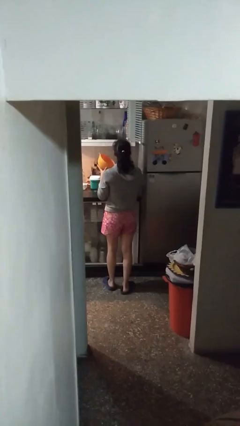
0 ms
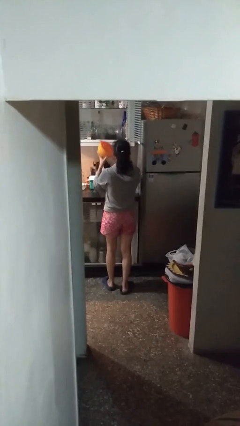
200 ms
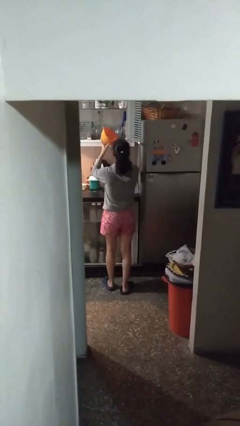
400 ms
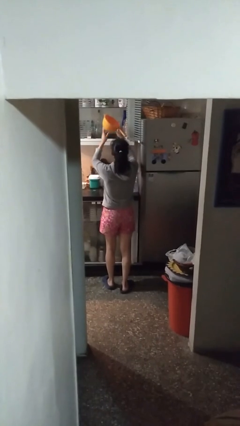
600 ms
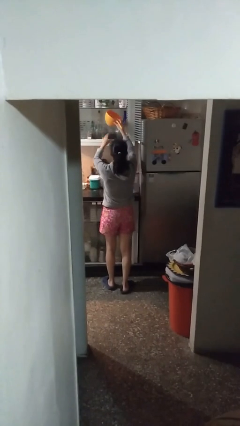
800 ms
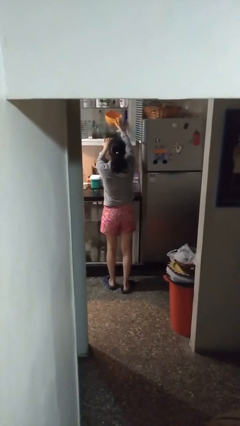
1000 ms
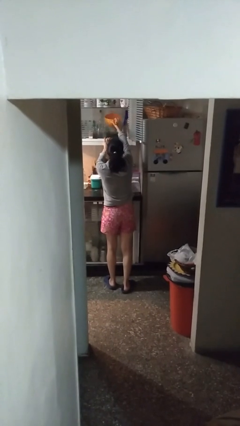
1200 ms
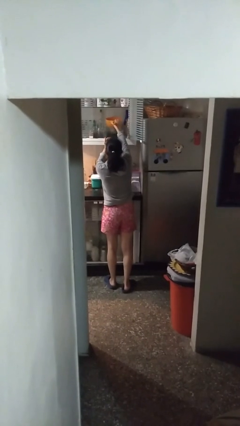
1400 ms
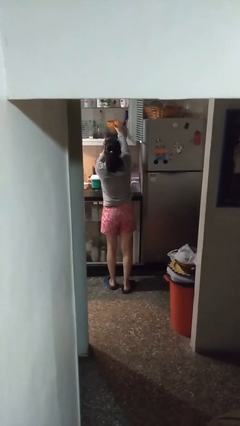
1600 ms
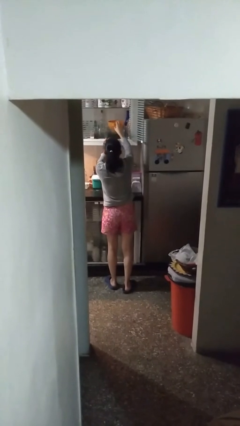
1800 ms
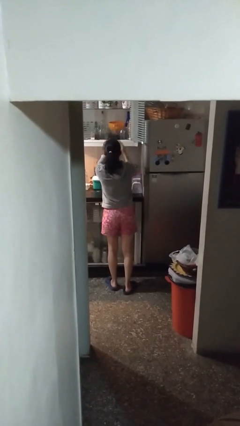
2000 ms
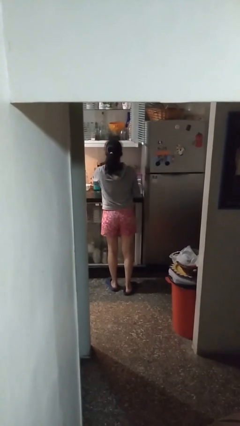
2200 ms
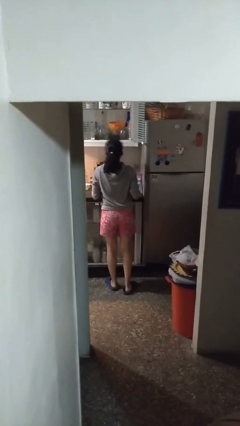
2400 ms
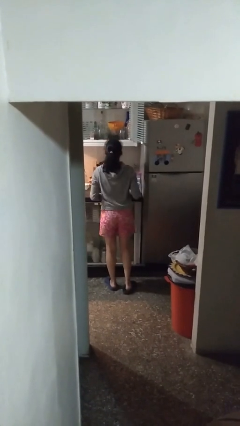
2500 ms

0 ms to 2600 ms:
person puts down object into cabinet

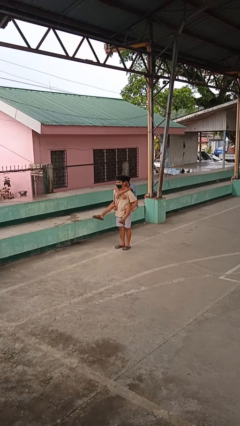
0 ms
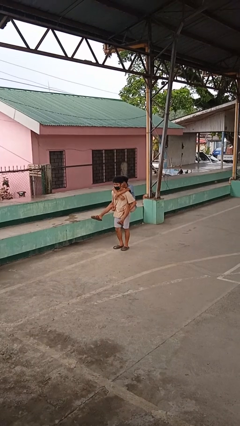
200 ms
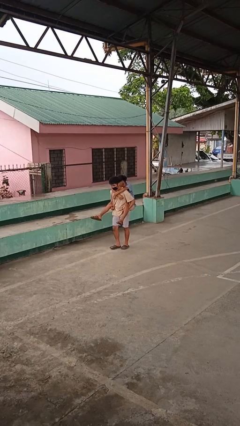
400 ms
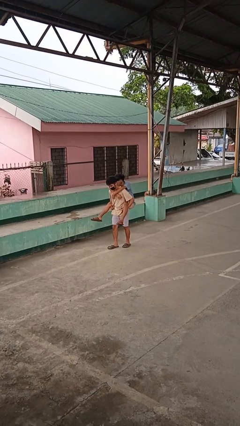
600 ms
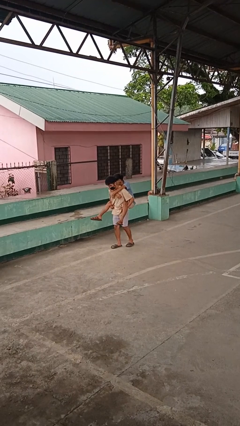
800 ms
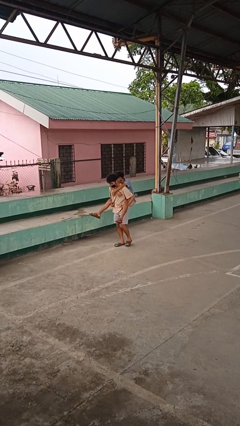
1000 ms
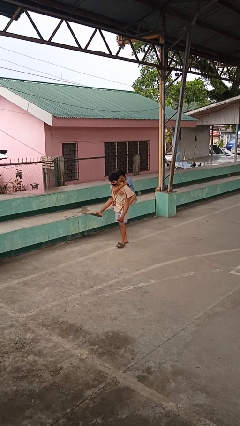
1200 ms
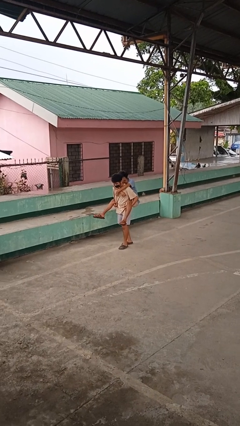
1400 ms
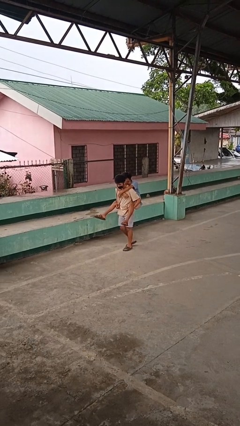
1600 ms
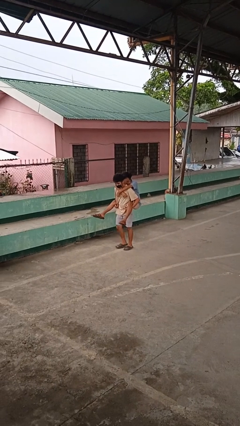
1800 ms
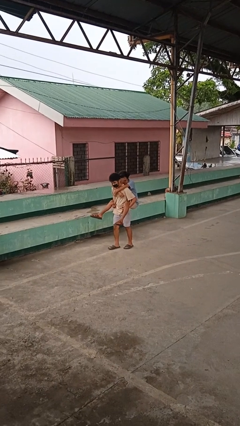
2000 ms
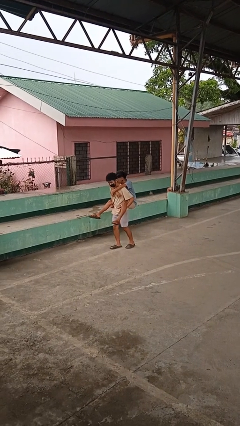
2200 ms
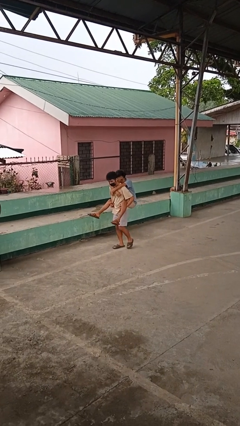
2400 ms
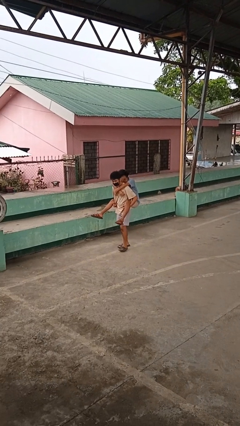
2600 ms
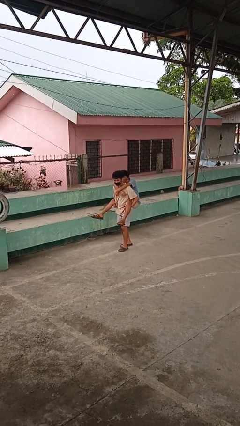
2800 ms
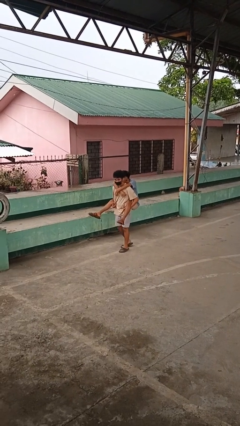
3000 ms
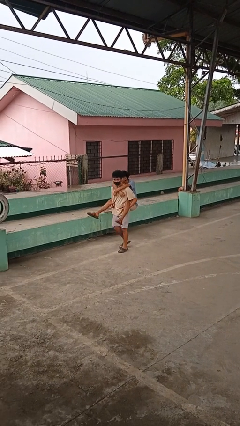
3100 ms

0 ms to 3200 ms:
person carries person on back

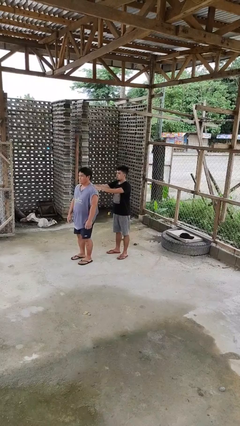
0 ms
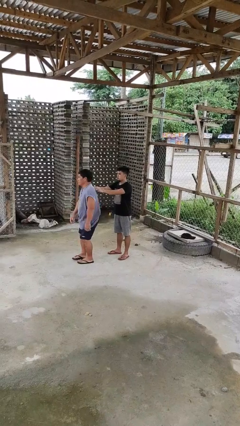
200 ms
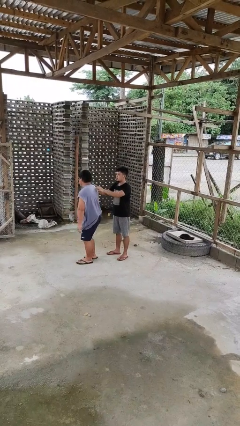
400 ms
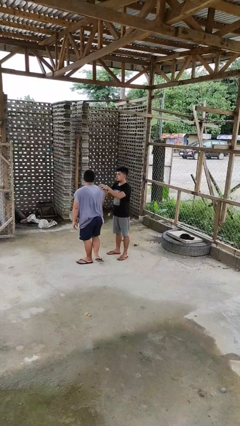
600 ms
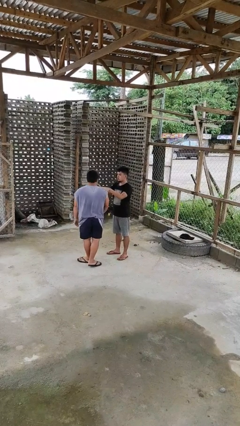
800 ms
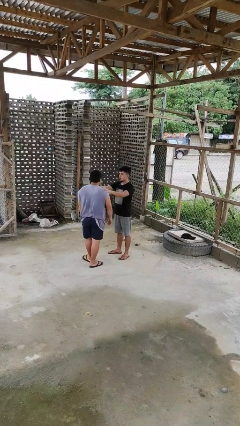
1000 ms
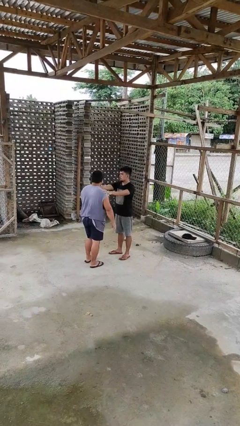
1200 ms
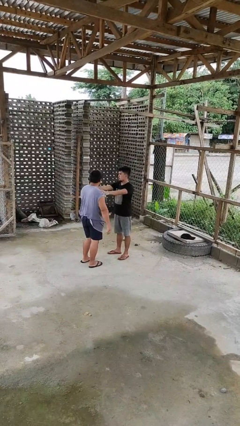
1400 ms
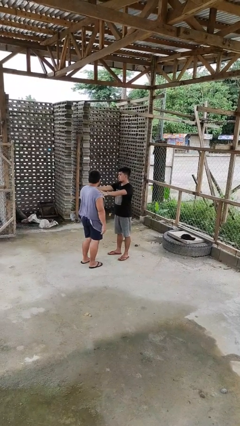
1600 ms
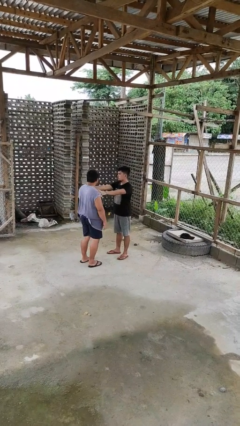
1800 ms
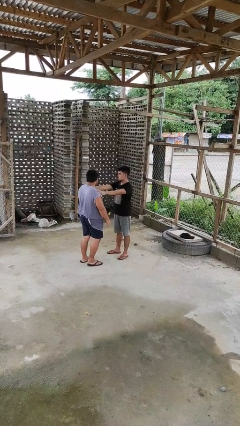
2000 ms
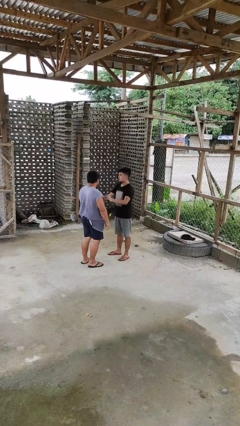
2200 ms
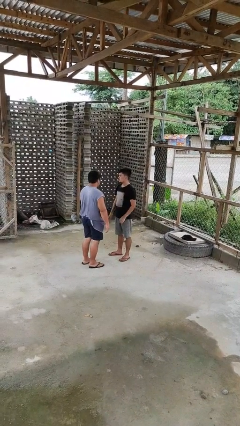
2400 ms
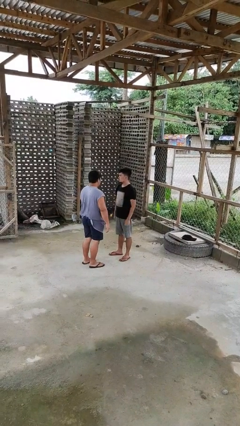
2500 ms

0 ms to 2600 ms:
person spins person around

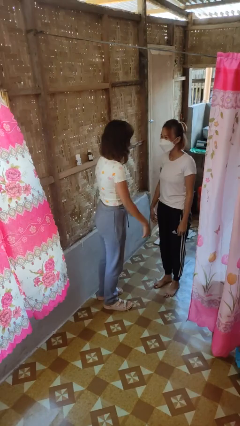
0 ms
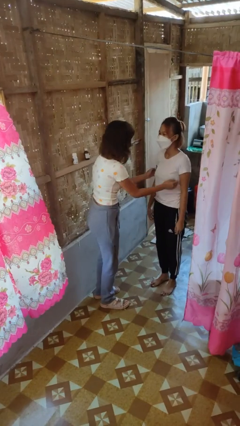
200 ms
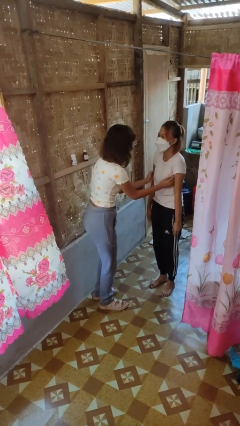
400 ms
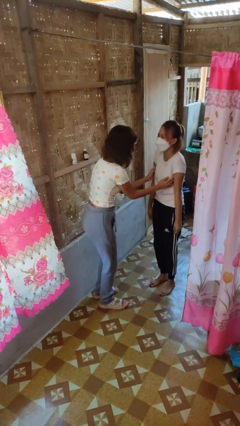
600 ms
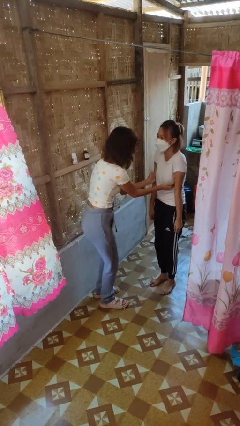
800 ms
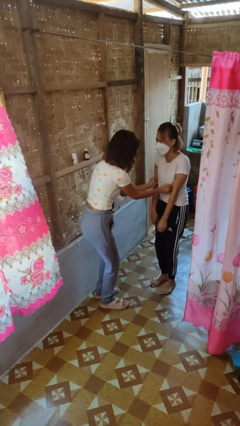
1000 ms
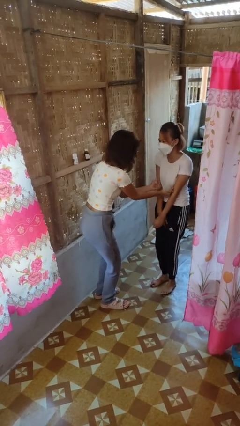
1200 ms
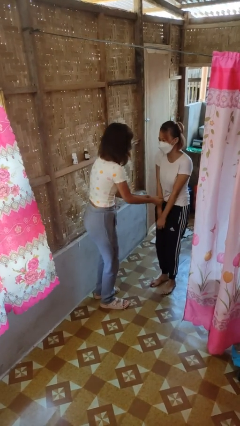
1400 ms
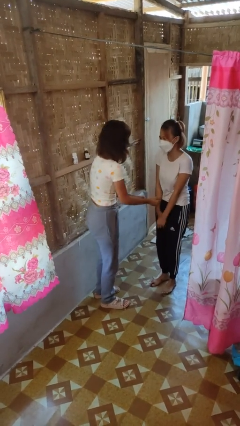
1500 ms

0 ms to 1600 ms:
person tickles person

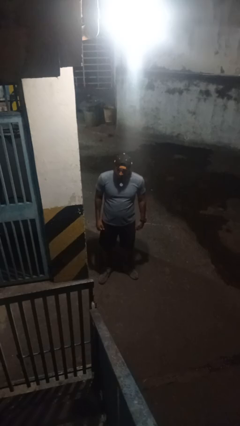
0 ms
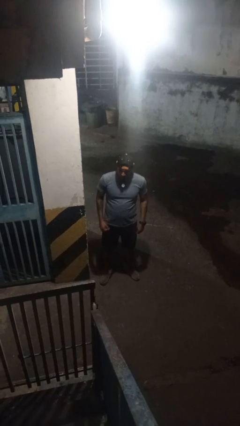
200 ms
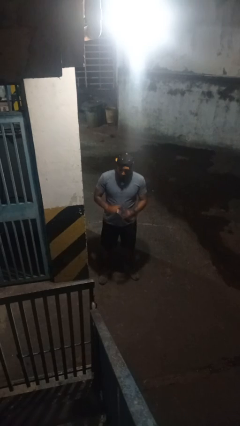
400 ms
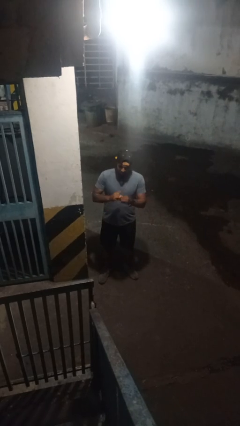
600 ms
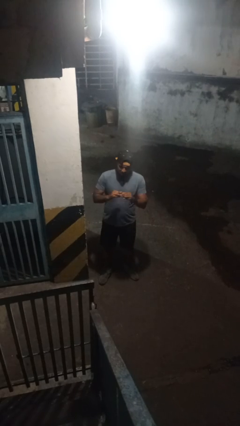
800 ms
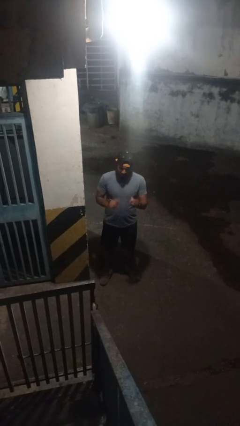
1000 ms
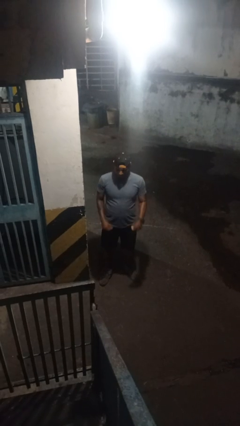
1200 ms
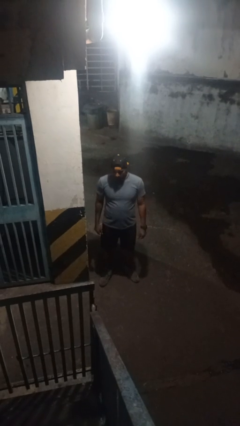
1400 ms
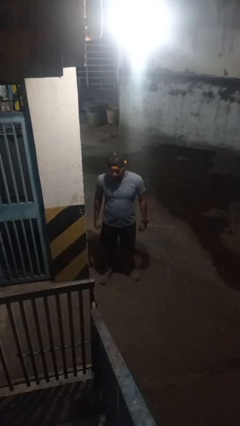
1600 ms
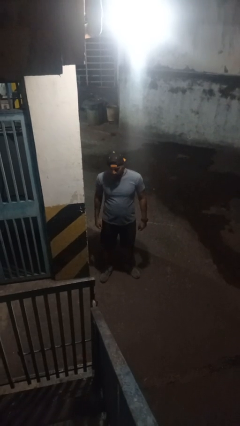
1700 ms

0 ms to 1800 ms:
person takes off ring

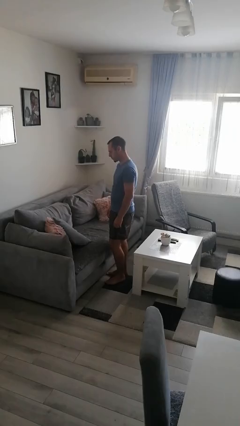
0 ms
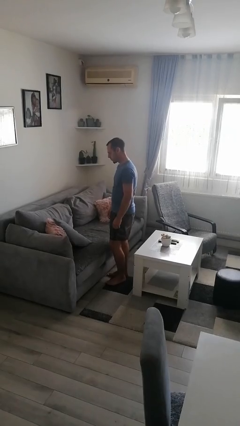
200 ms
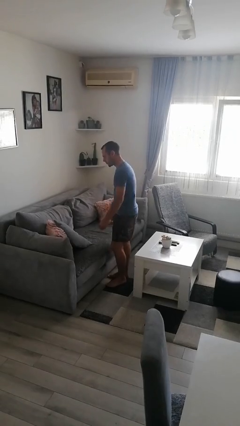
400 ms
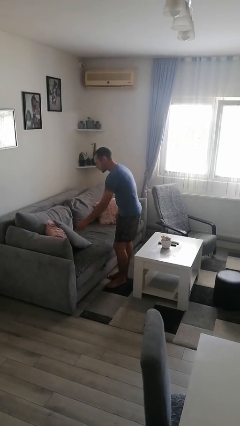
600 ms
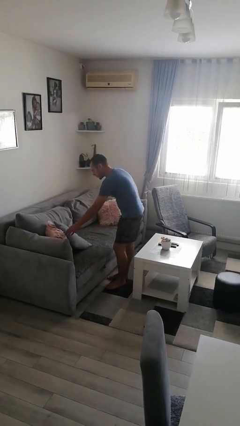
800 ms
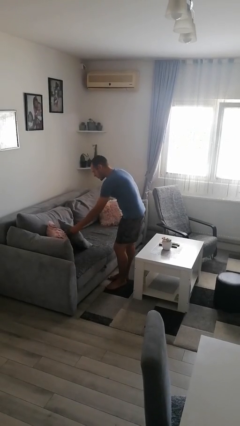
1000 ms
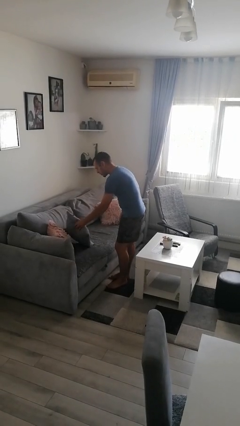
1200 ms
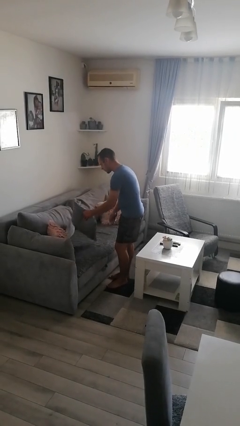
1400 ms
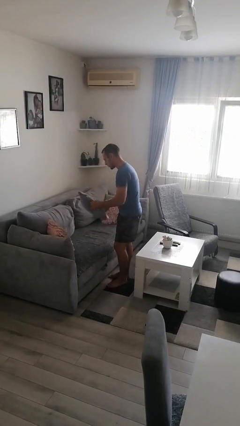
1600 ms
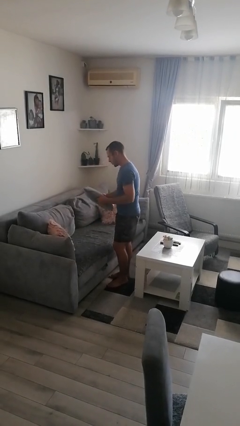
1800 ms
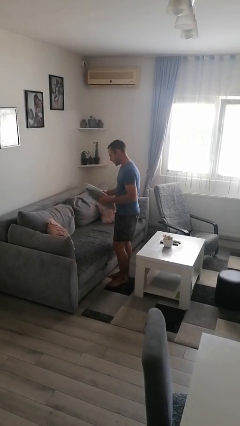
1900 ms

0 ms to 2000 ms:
person picks up object from couch

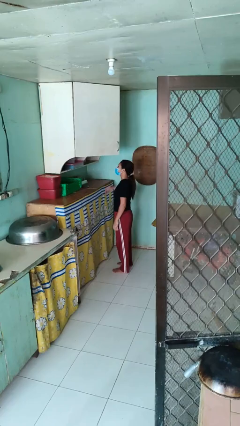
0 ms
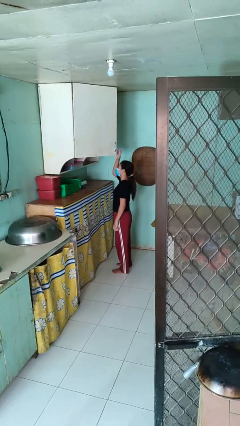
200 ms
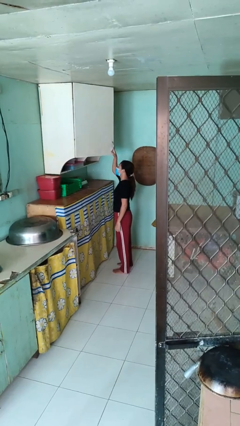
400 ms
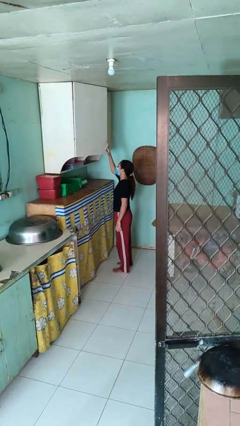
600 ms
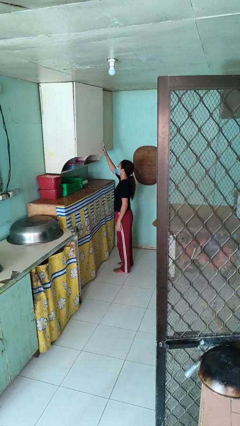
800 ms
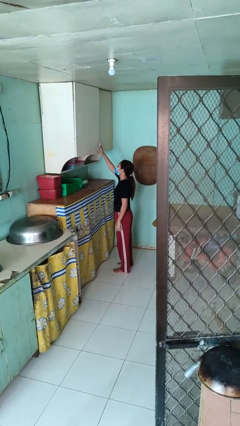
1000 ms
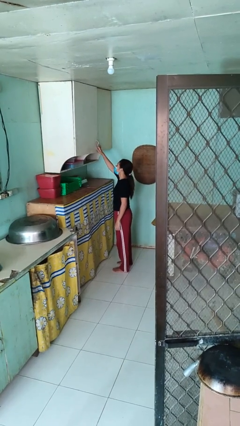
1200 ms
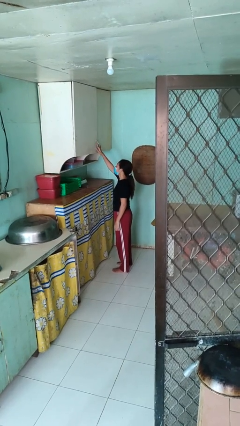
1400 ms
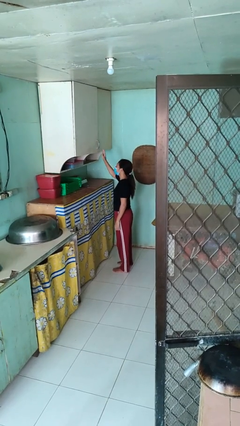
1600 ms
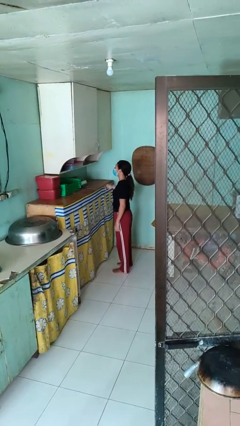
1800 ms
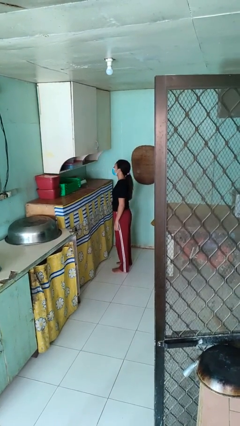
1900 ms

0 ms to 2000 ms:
person closes cabinet

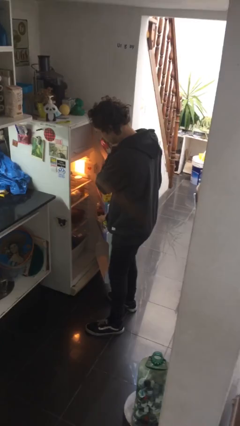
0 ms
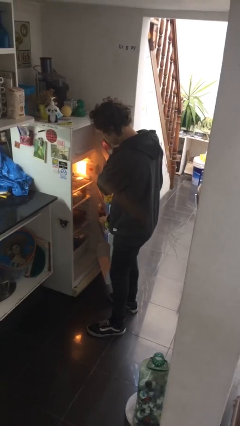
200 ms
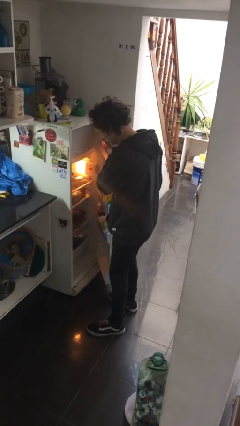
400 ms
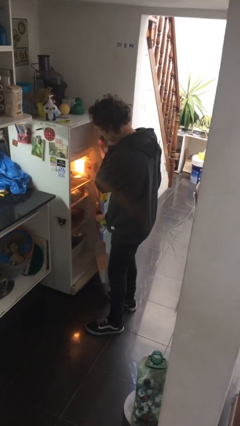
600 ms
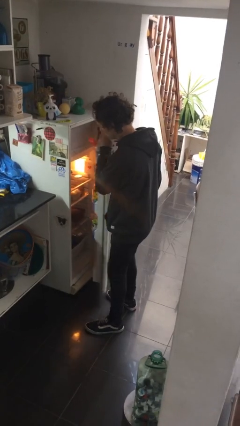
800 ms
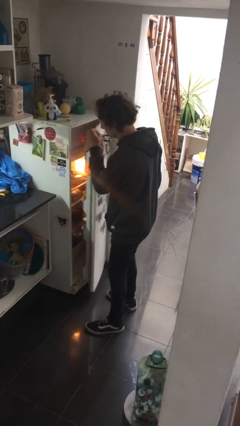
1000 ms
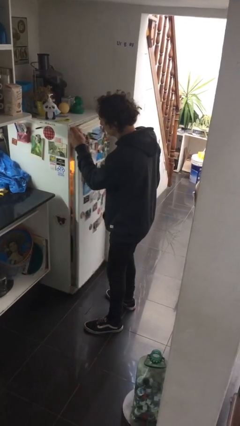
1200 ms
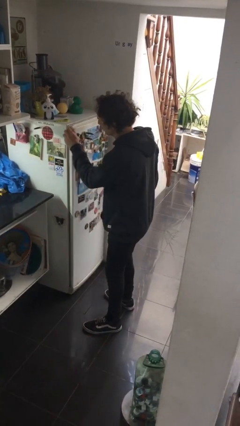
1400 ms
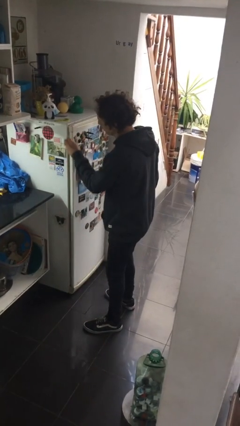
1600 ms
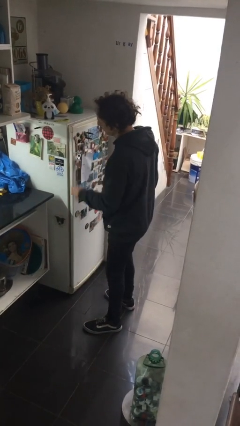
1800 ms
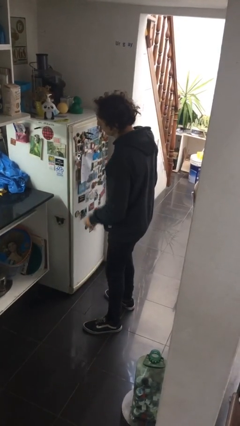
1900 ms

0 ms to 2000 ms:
person closes refrigerator
